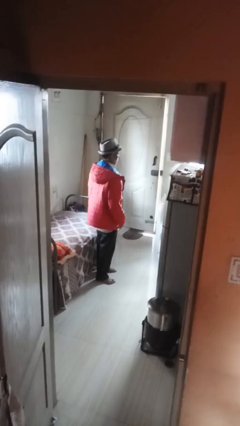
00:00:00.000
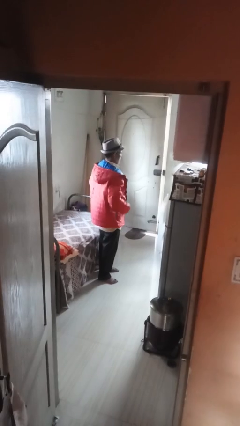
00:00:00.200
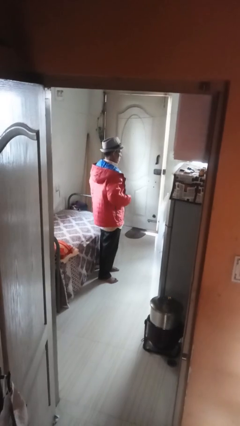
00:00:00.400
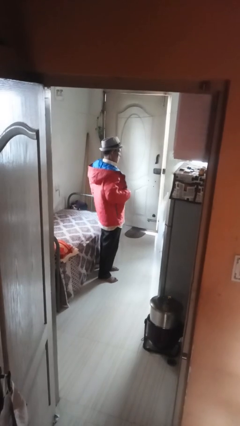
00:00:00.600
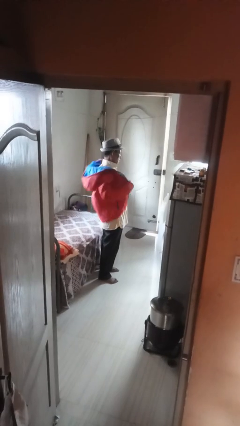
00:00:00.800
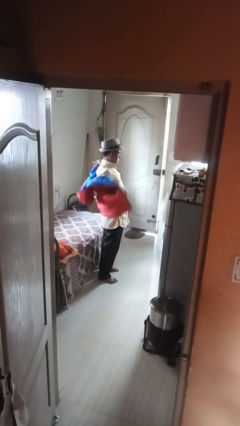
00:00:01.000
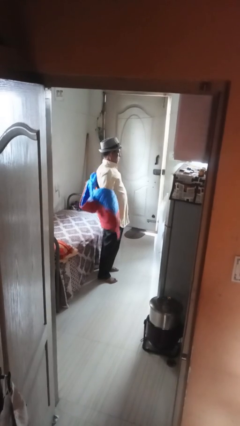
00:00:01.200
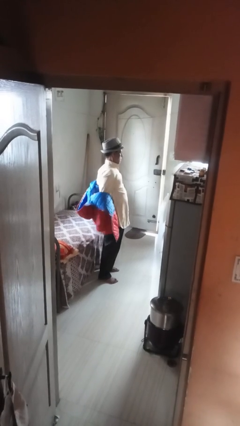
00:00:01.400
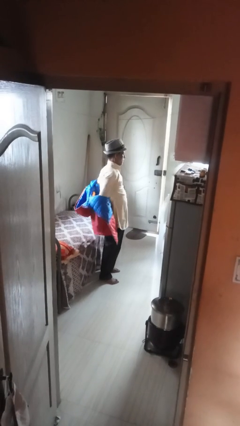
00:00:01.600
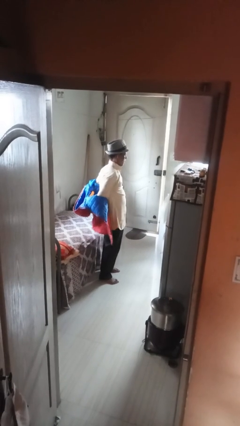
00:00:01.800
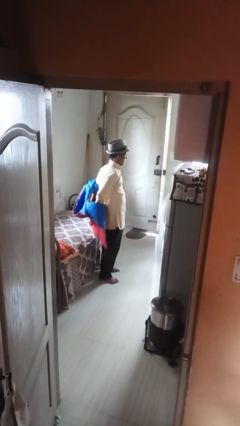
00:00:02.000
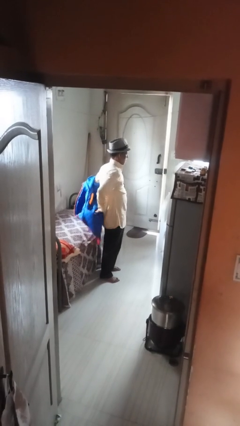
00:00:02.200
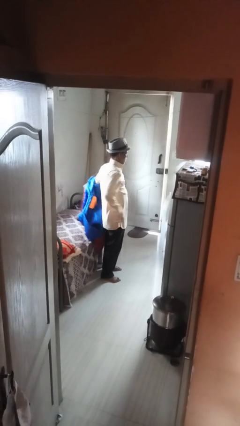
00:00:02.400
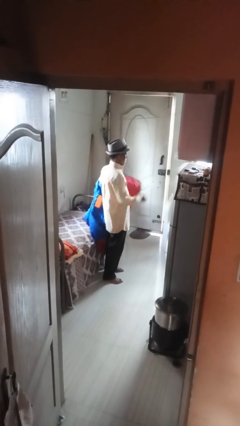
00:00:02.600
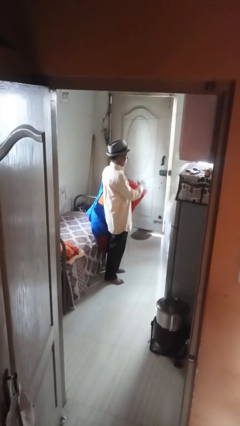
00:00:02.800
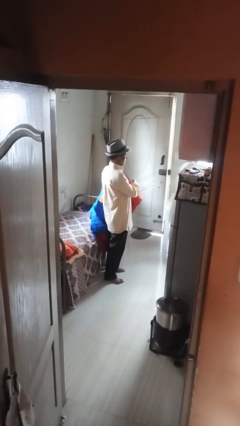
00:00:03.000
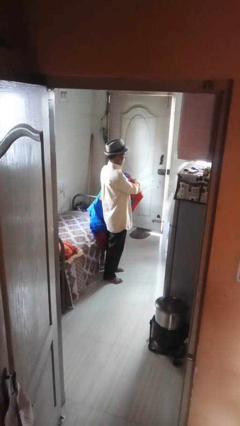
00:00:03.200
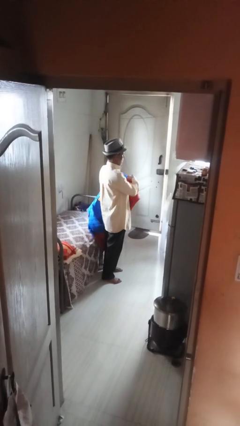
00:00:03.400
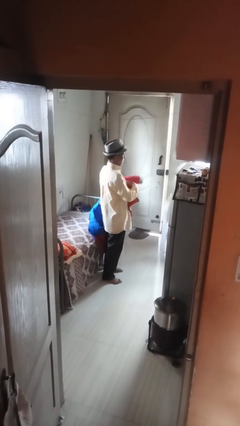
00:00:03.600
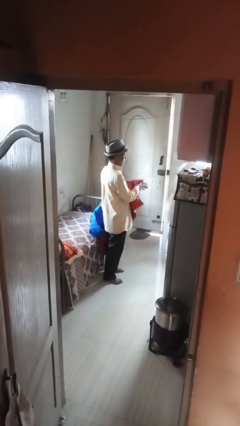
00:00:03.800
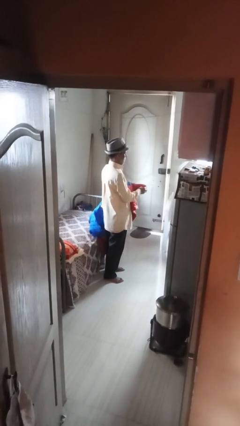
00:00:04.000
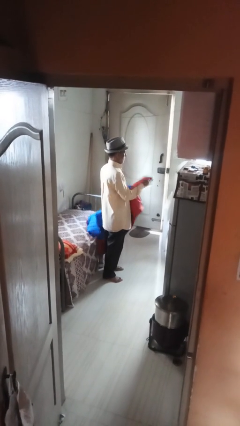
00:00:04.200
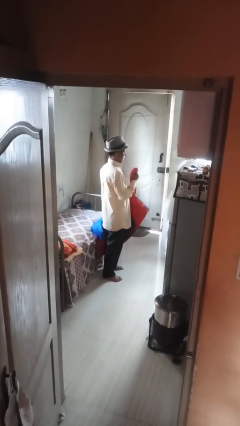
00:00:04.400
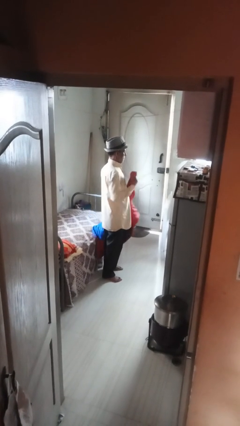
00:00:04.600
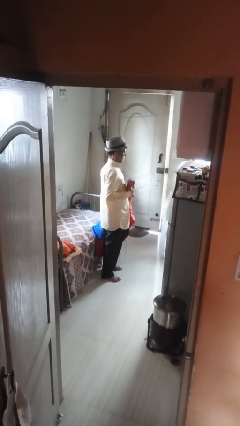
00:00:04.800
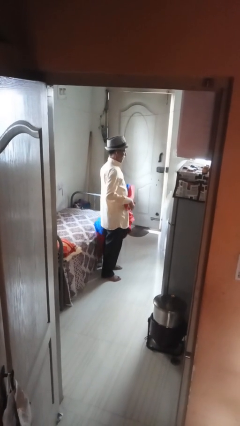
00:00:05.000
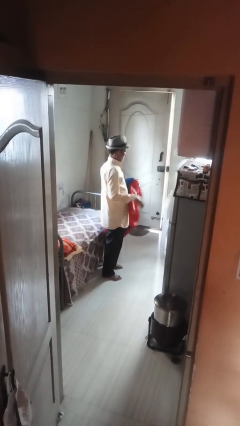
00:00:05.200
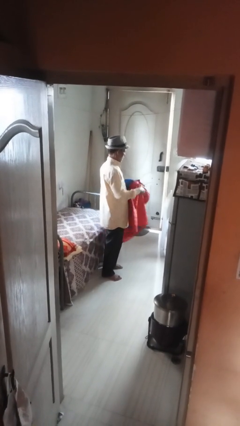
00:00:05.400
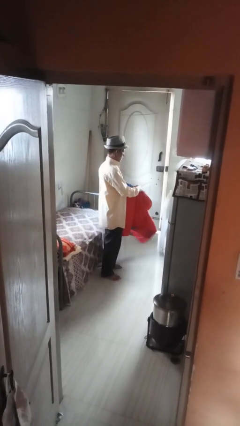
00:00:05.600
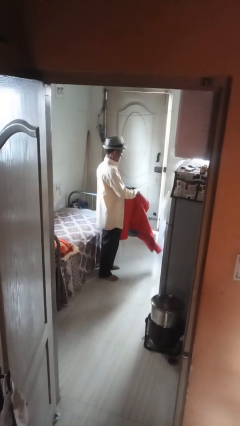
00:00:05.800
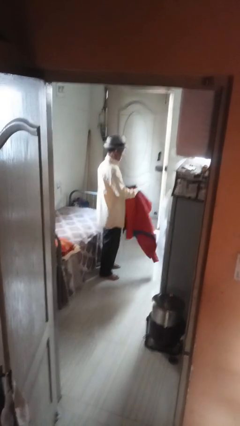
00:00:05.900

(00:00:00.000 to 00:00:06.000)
person takes off jacket

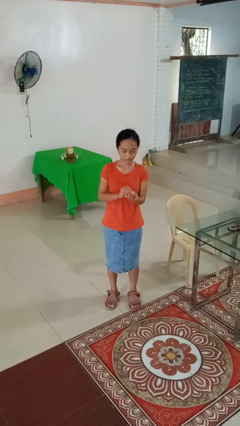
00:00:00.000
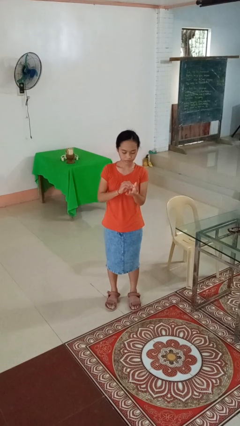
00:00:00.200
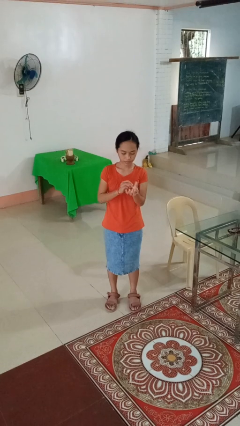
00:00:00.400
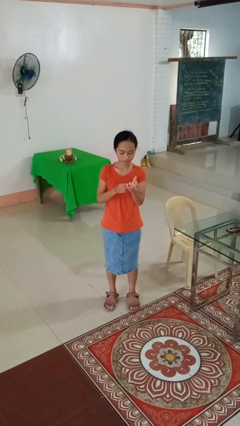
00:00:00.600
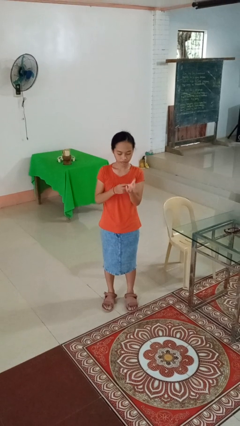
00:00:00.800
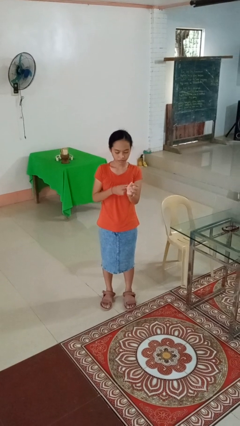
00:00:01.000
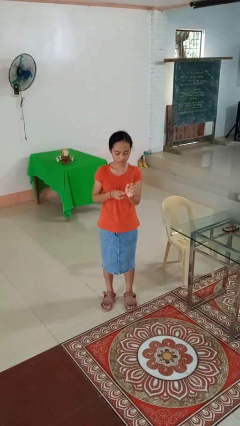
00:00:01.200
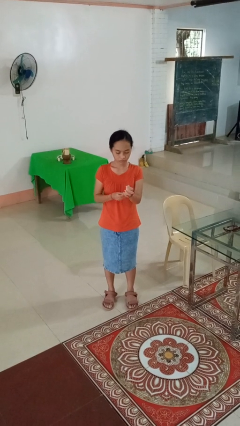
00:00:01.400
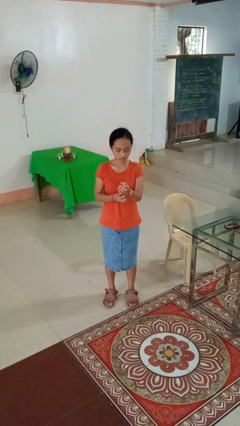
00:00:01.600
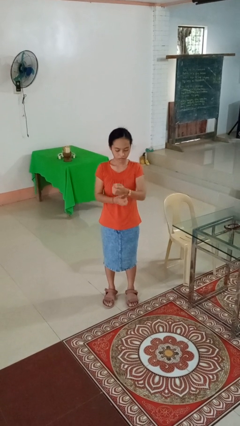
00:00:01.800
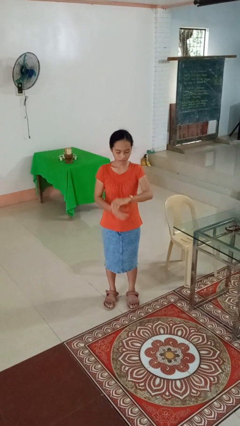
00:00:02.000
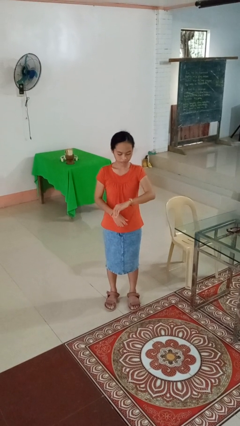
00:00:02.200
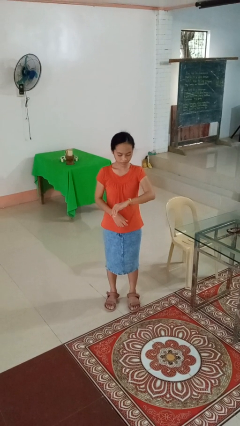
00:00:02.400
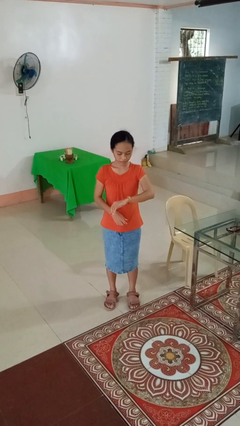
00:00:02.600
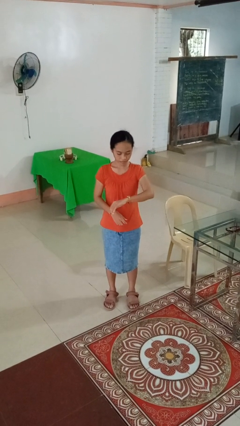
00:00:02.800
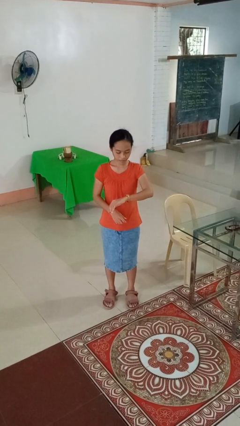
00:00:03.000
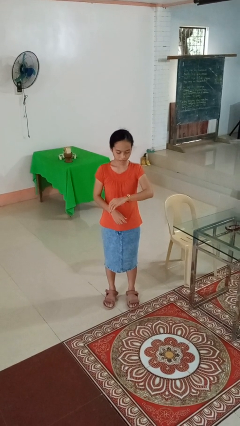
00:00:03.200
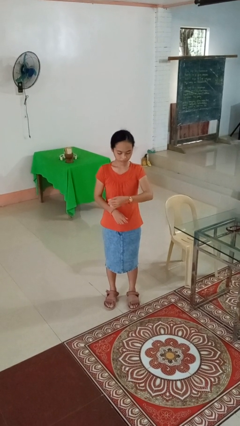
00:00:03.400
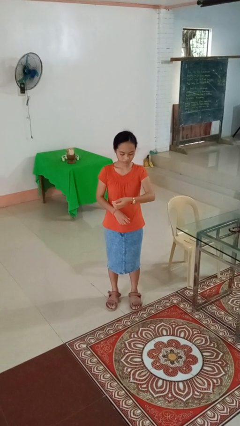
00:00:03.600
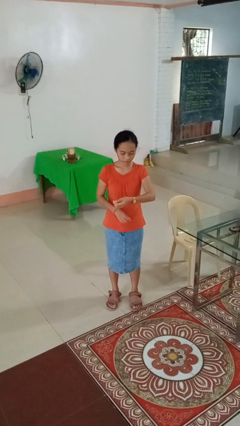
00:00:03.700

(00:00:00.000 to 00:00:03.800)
person puts on wristwatch

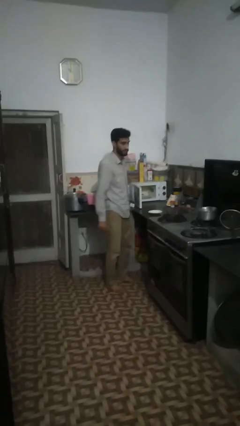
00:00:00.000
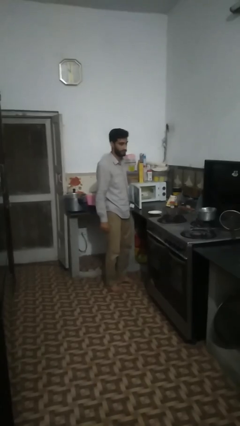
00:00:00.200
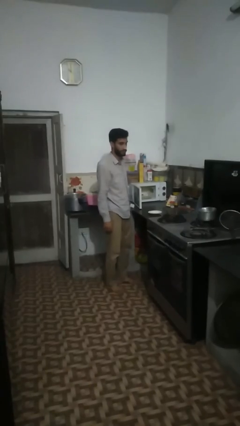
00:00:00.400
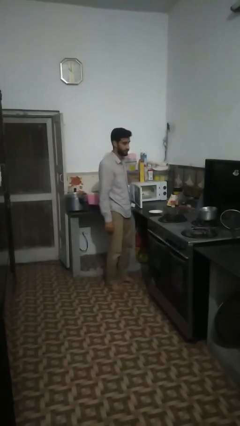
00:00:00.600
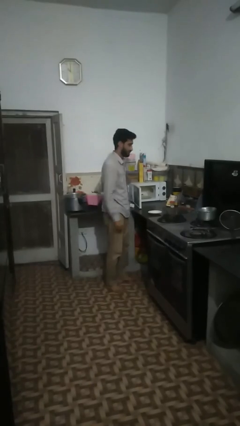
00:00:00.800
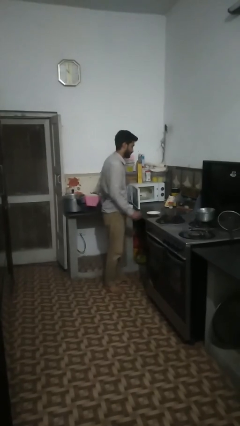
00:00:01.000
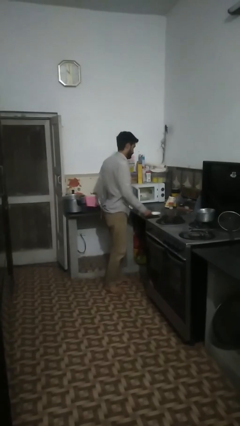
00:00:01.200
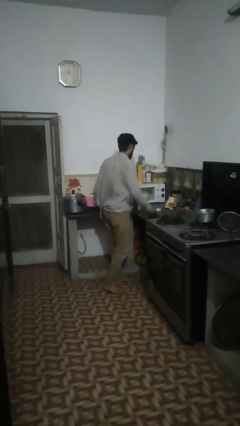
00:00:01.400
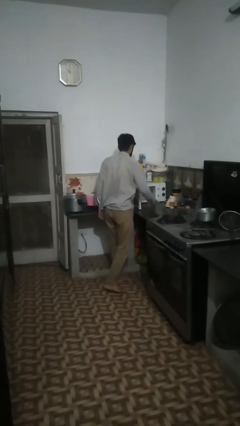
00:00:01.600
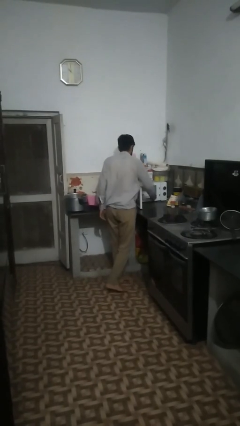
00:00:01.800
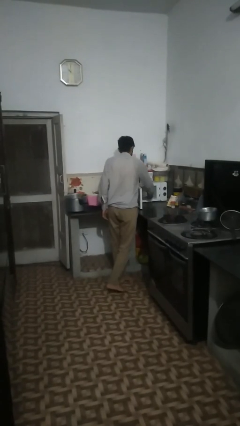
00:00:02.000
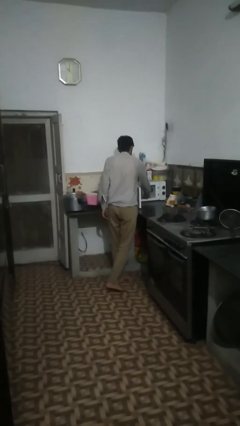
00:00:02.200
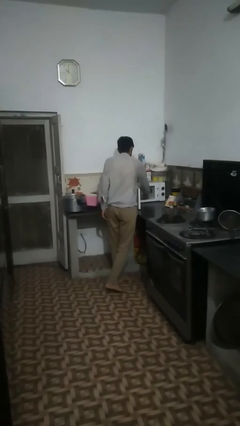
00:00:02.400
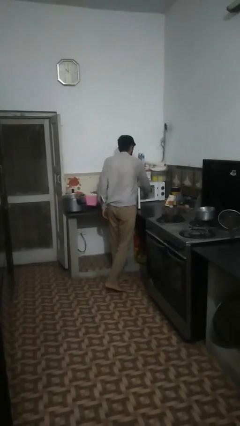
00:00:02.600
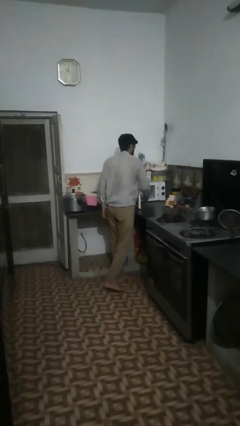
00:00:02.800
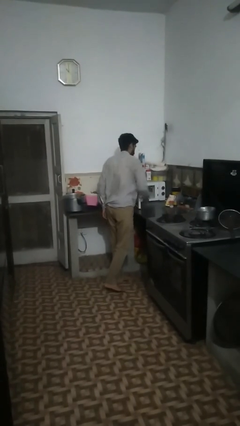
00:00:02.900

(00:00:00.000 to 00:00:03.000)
person puts object into microwave

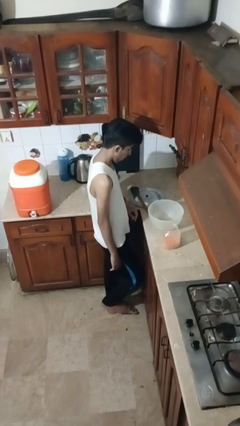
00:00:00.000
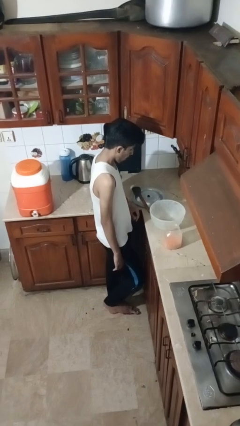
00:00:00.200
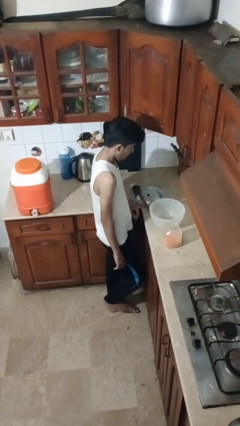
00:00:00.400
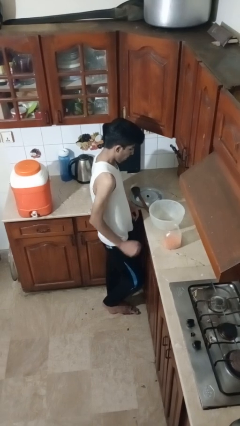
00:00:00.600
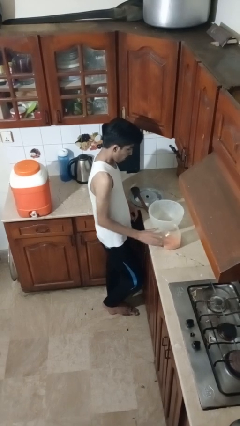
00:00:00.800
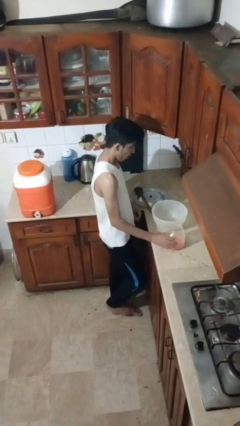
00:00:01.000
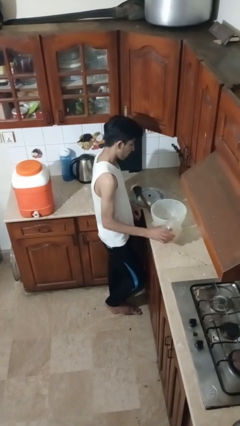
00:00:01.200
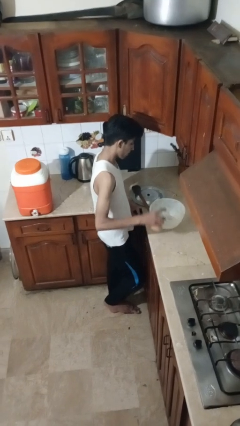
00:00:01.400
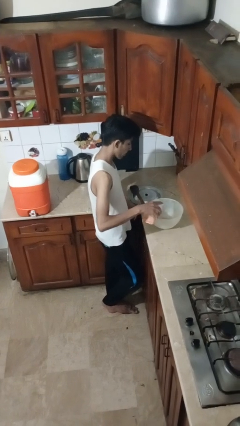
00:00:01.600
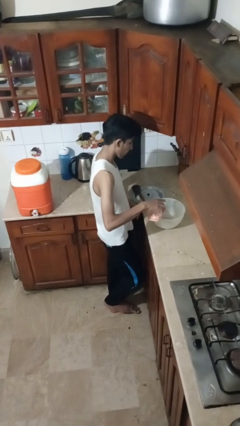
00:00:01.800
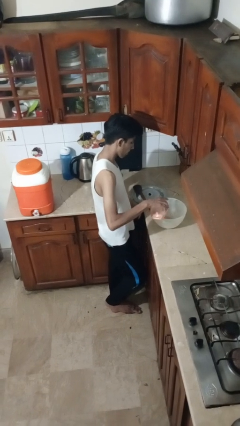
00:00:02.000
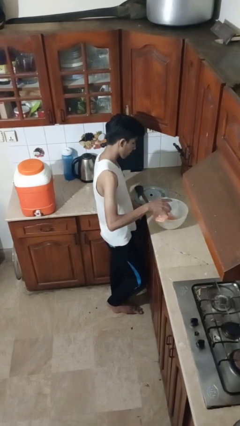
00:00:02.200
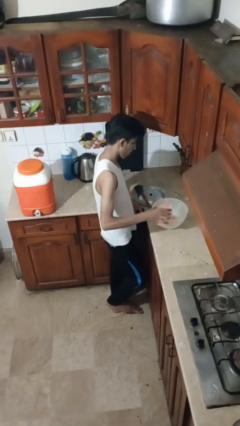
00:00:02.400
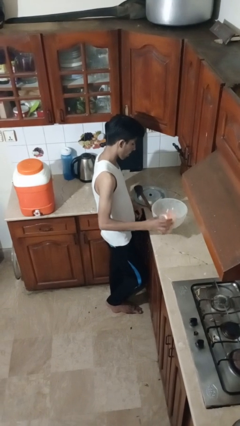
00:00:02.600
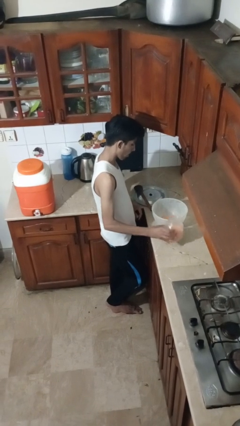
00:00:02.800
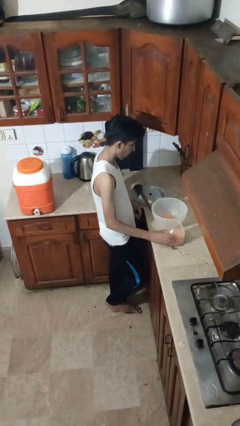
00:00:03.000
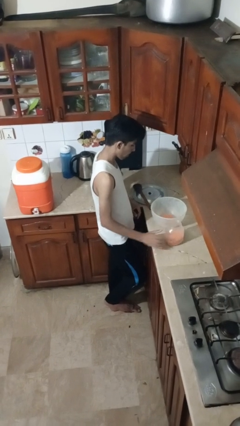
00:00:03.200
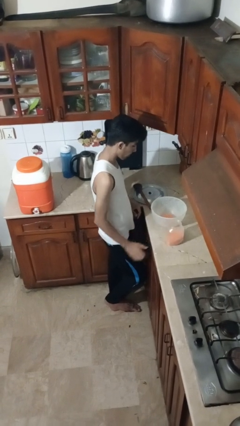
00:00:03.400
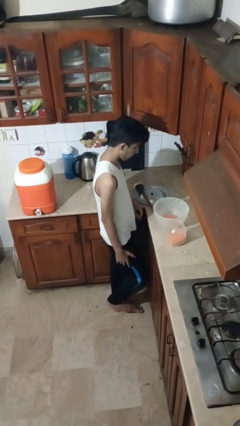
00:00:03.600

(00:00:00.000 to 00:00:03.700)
person pours into bowl

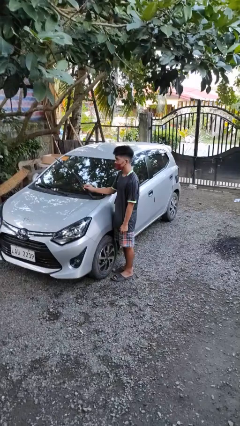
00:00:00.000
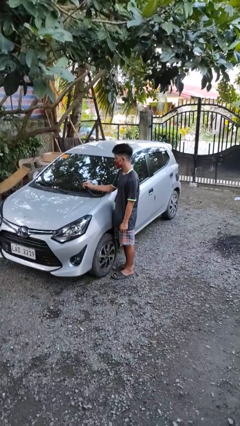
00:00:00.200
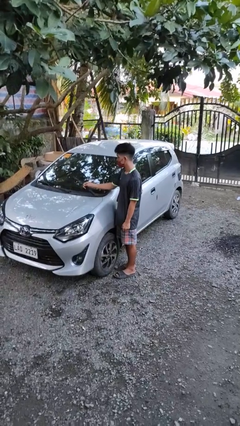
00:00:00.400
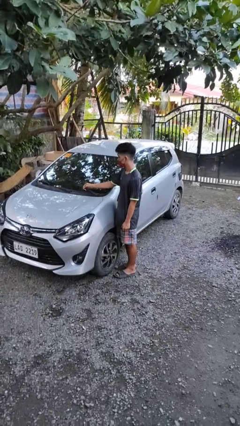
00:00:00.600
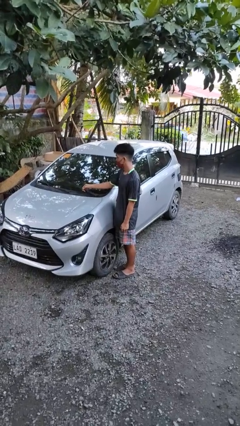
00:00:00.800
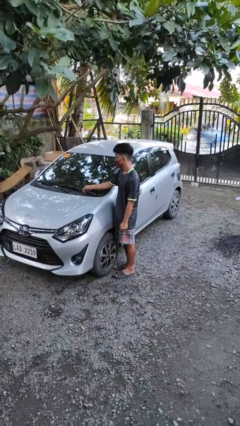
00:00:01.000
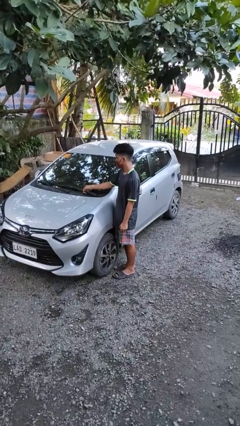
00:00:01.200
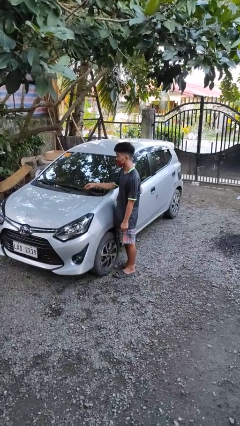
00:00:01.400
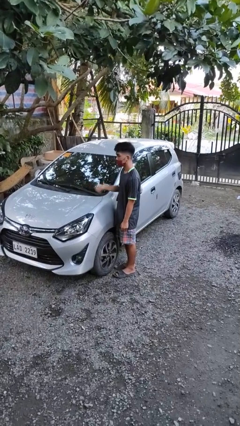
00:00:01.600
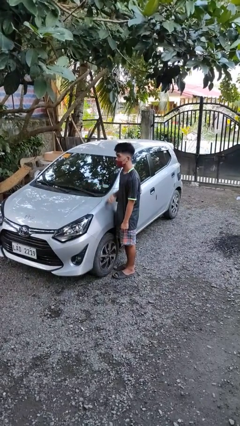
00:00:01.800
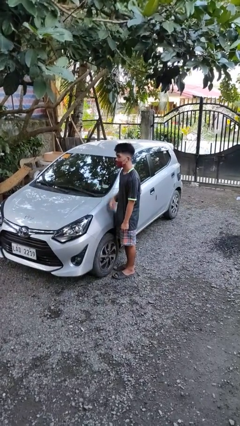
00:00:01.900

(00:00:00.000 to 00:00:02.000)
person flips down car wipers
